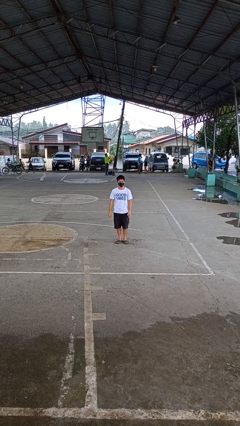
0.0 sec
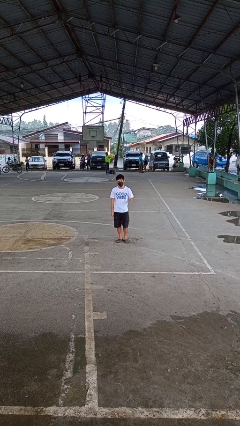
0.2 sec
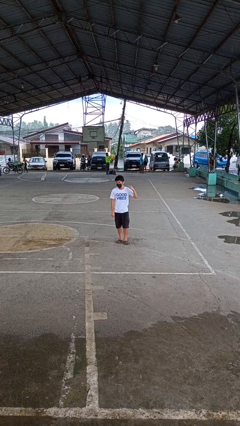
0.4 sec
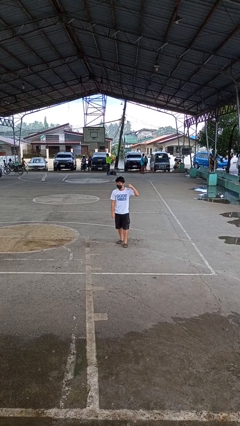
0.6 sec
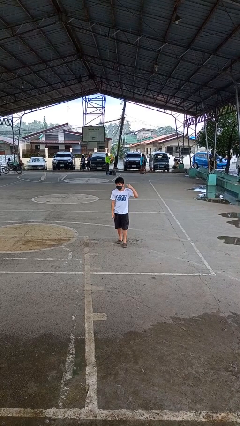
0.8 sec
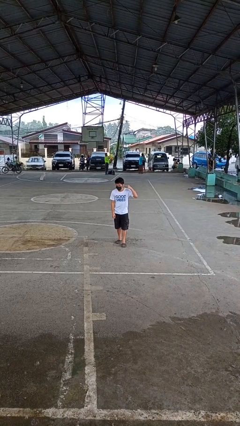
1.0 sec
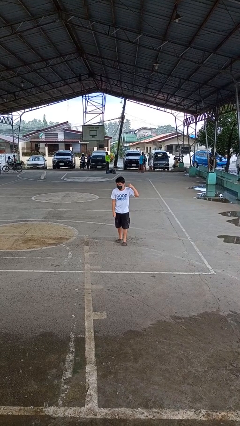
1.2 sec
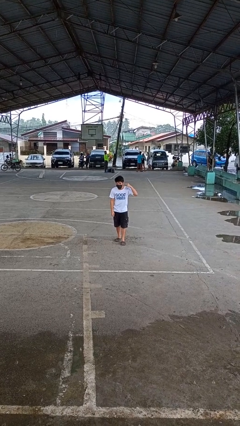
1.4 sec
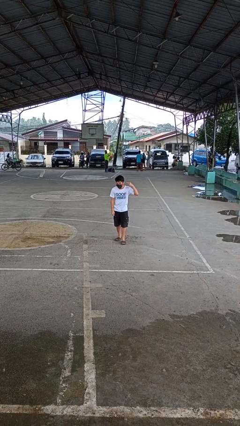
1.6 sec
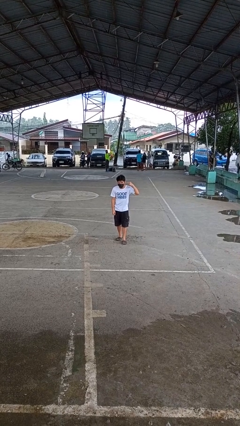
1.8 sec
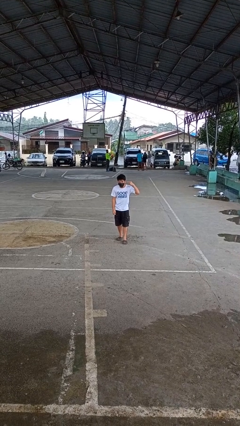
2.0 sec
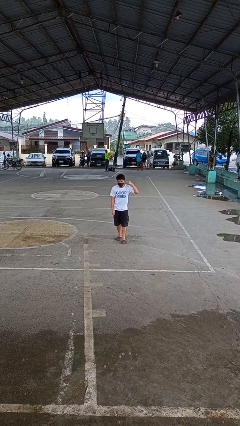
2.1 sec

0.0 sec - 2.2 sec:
person gestures listen closely

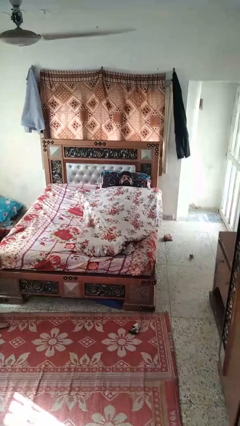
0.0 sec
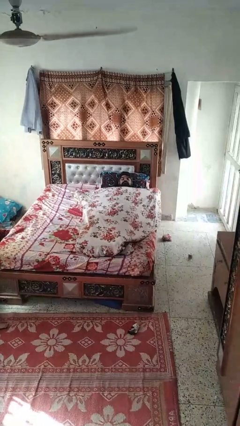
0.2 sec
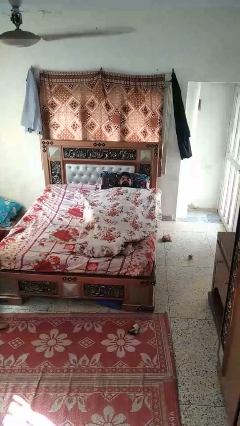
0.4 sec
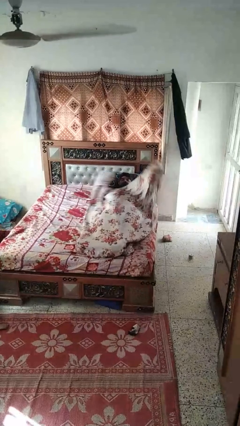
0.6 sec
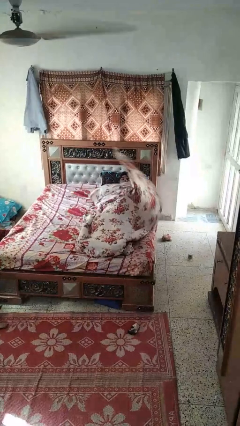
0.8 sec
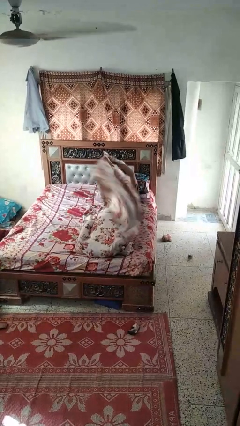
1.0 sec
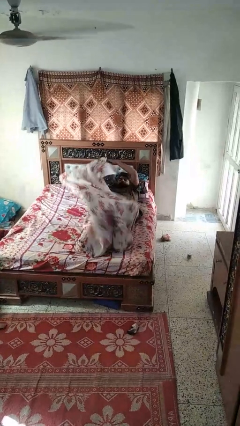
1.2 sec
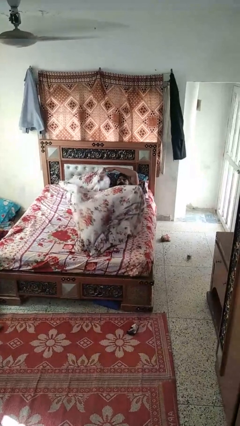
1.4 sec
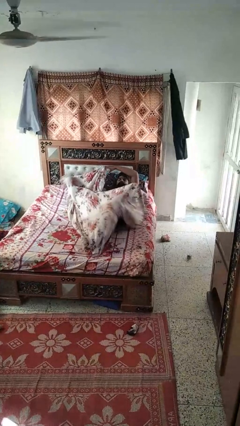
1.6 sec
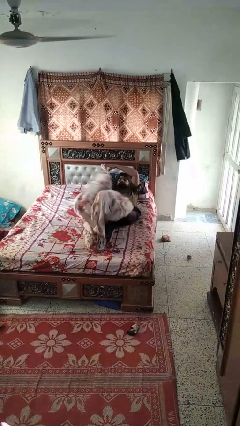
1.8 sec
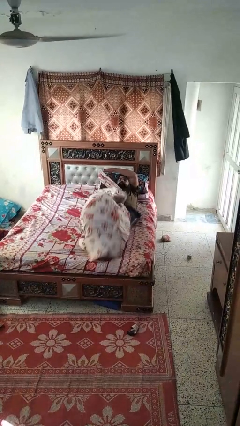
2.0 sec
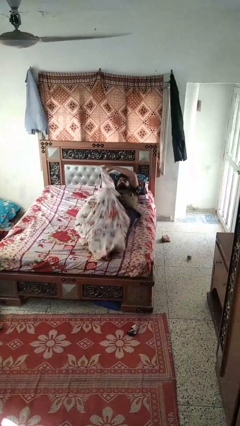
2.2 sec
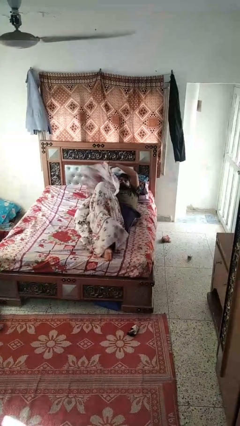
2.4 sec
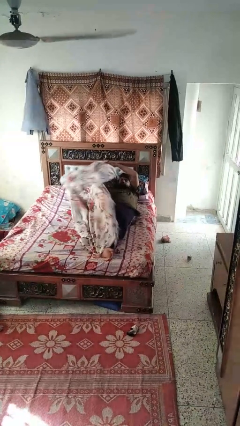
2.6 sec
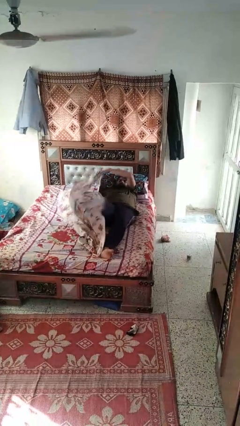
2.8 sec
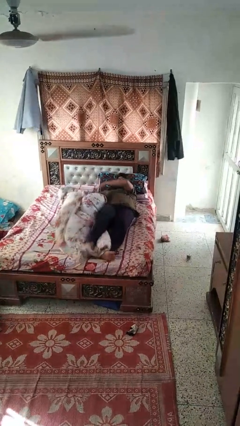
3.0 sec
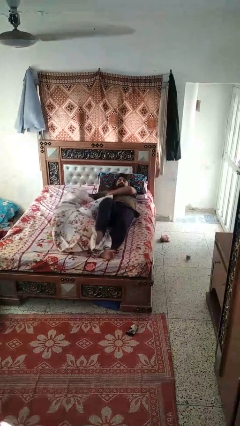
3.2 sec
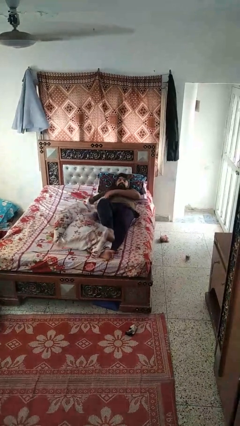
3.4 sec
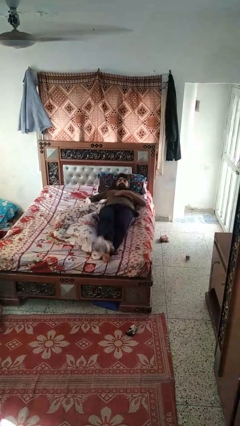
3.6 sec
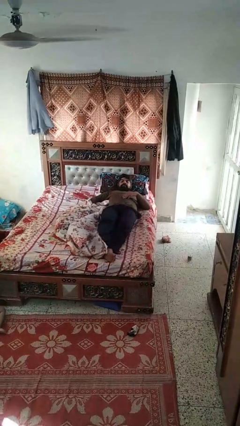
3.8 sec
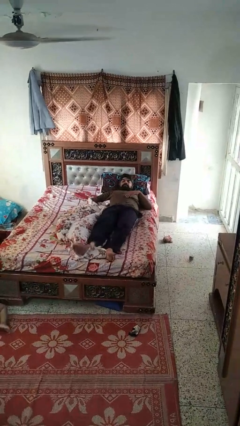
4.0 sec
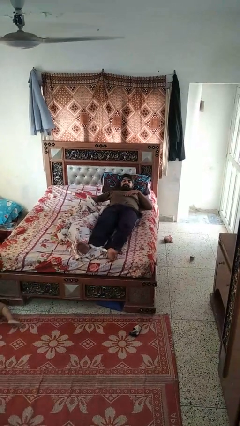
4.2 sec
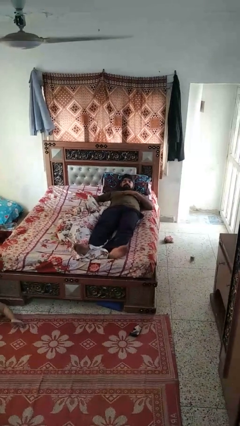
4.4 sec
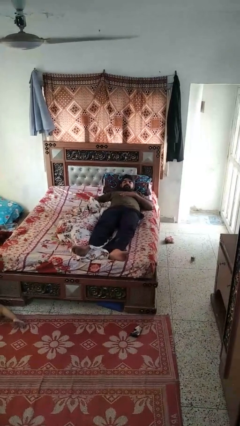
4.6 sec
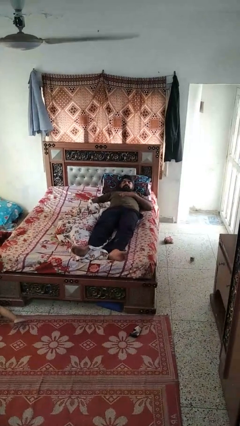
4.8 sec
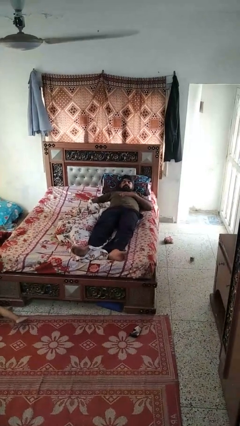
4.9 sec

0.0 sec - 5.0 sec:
person uncovers with bedsheets

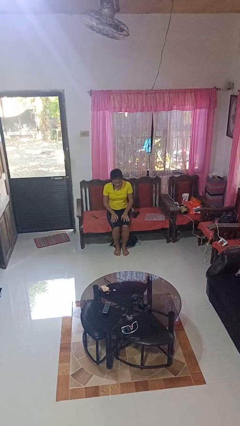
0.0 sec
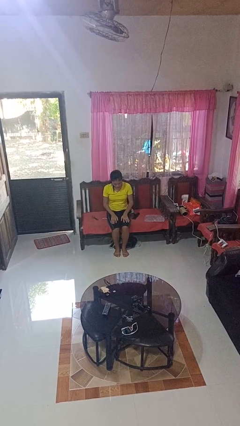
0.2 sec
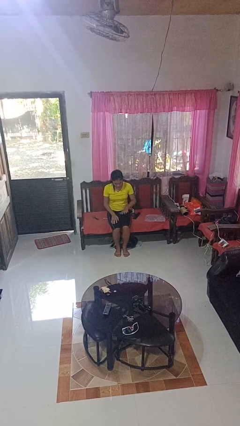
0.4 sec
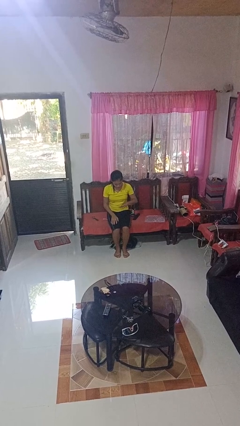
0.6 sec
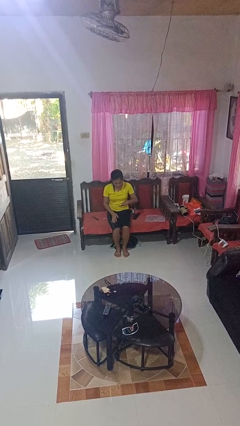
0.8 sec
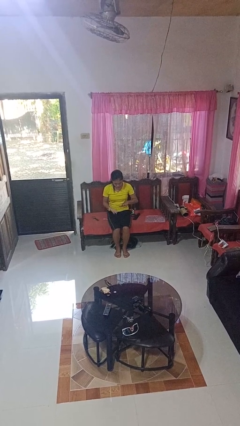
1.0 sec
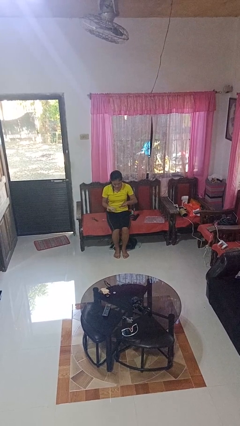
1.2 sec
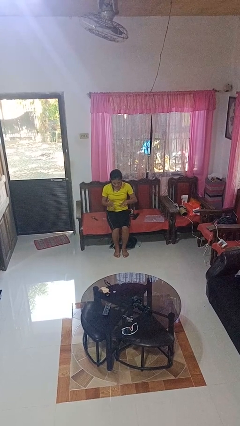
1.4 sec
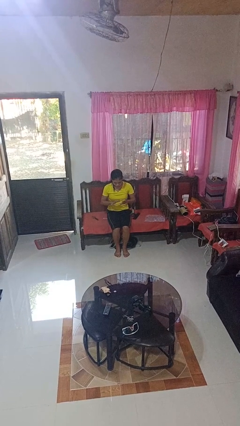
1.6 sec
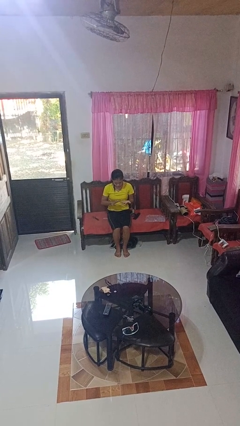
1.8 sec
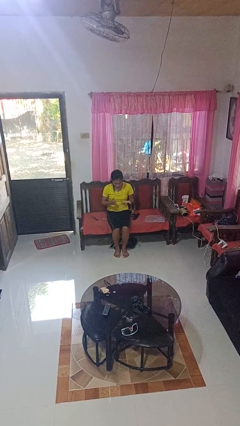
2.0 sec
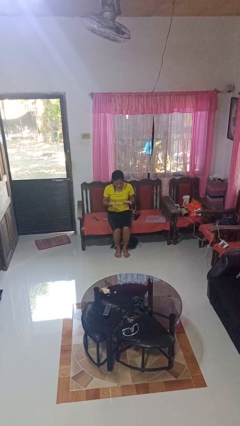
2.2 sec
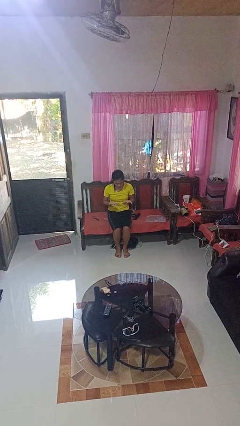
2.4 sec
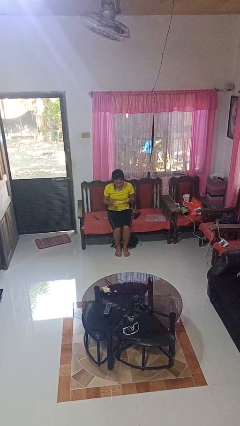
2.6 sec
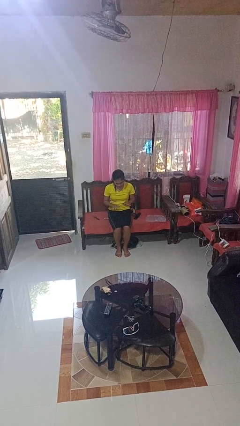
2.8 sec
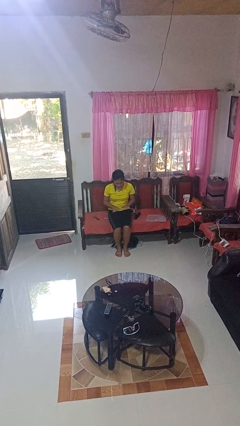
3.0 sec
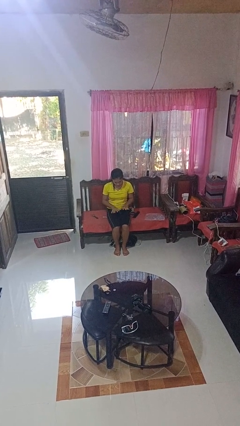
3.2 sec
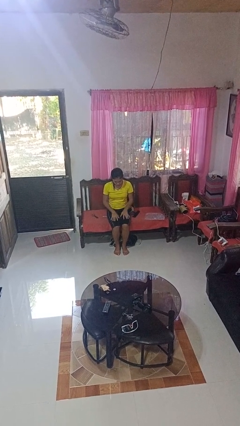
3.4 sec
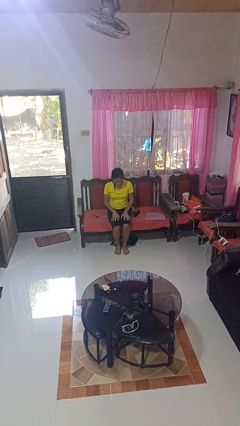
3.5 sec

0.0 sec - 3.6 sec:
person looks at hands in lap

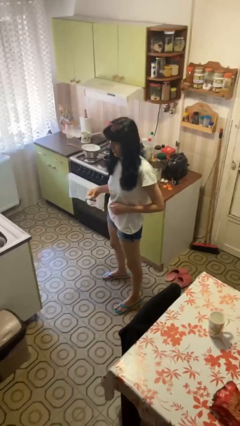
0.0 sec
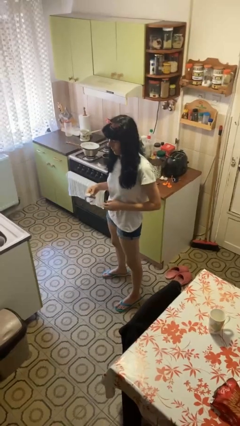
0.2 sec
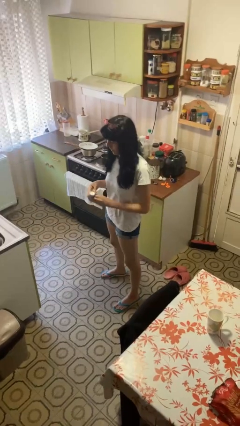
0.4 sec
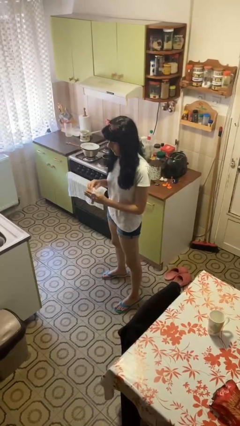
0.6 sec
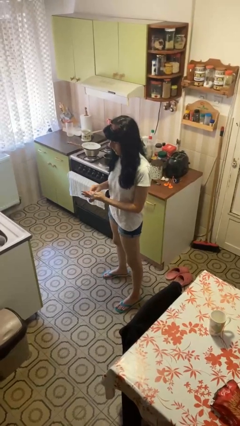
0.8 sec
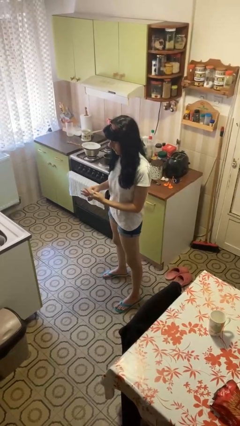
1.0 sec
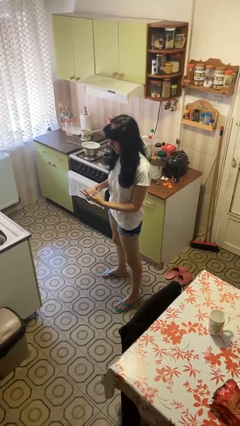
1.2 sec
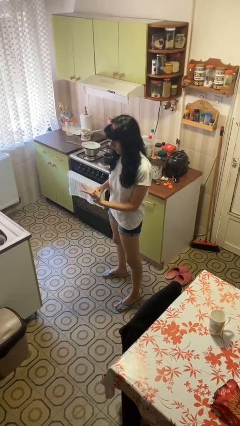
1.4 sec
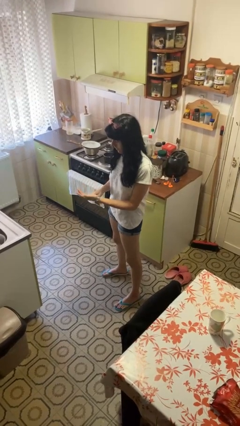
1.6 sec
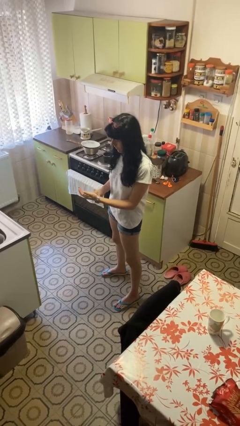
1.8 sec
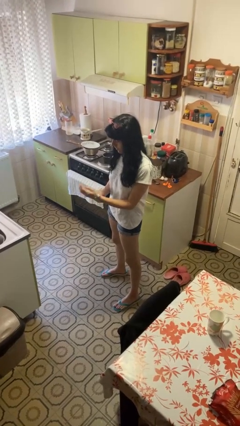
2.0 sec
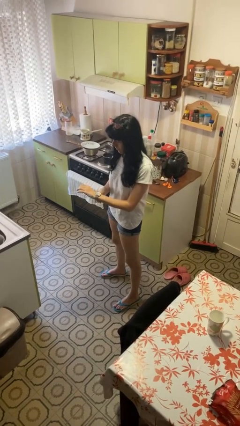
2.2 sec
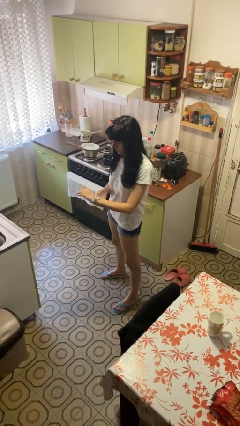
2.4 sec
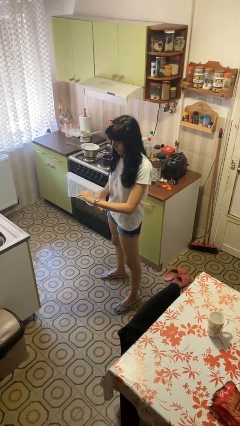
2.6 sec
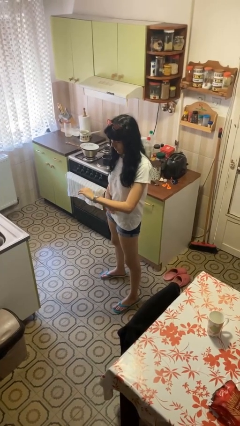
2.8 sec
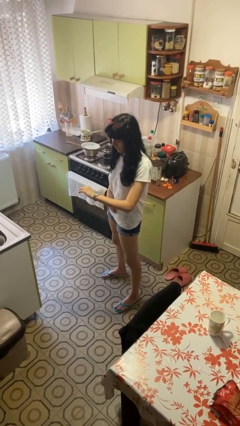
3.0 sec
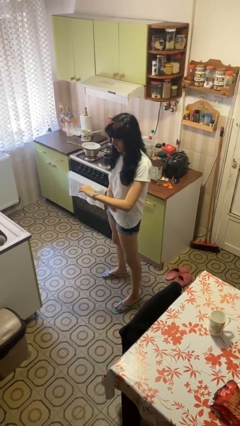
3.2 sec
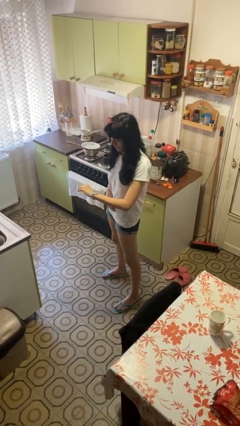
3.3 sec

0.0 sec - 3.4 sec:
person puts on wristwatch

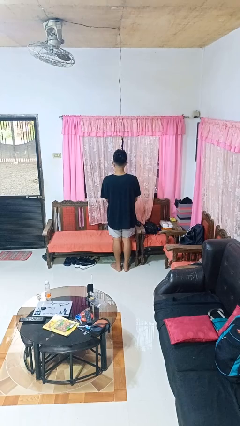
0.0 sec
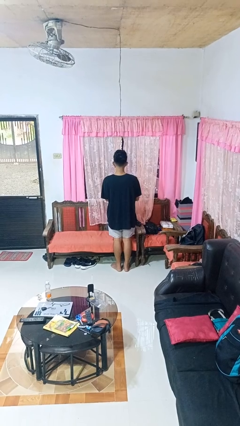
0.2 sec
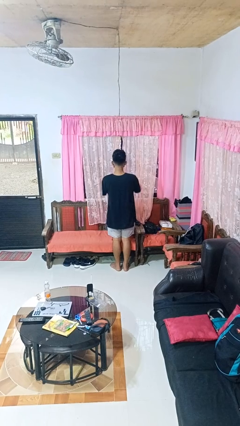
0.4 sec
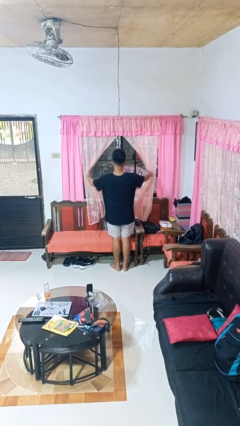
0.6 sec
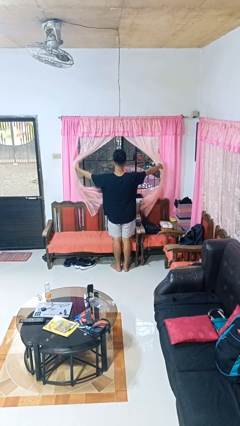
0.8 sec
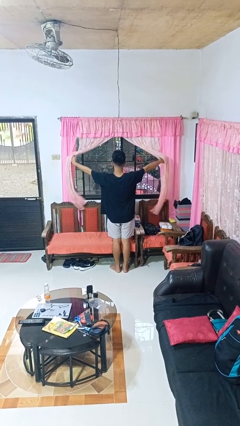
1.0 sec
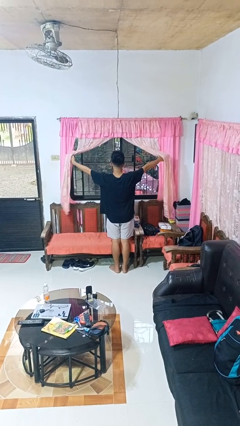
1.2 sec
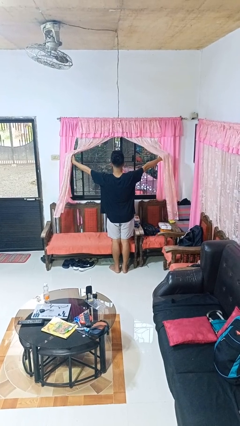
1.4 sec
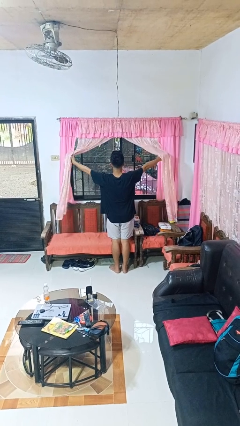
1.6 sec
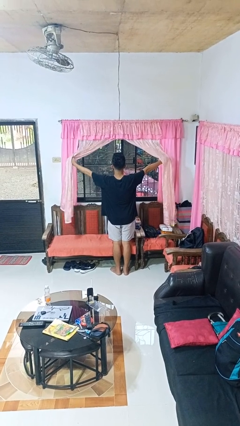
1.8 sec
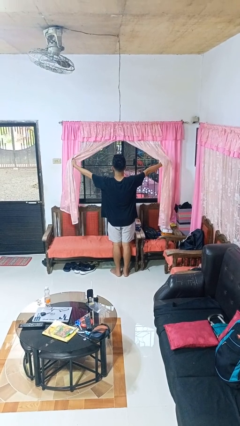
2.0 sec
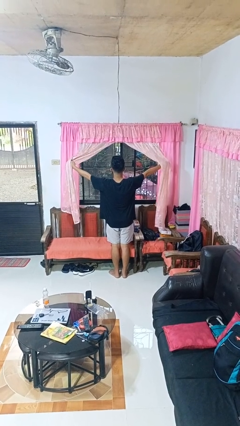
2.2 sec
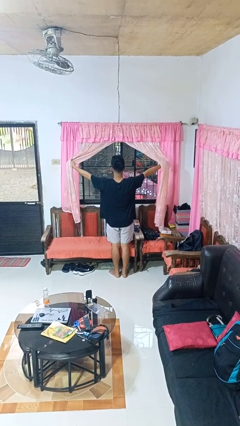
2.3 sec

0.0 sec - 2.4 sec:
person opens curtains

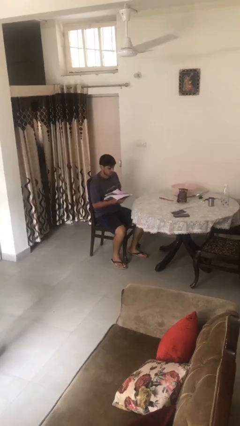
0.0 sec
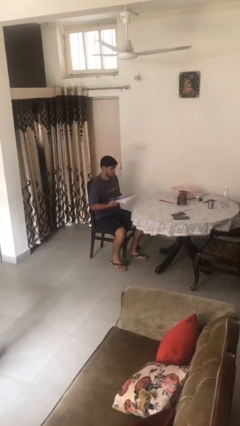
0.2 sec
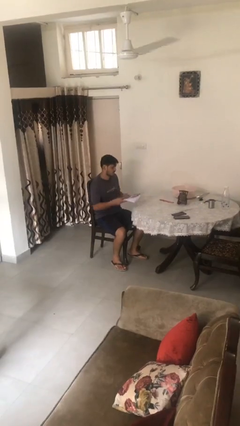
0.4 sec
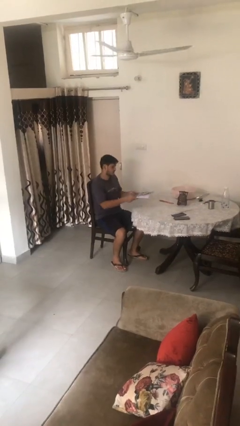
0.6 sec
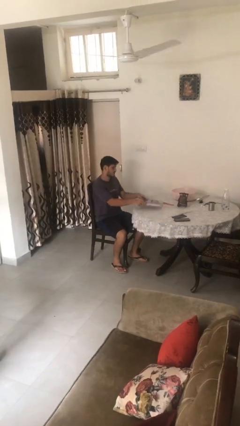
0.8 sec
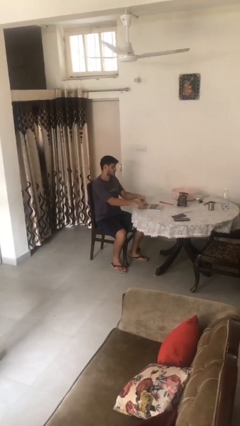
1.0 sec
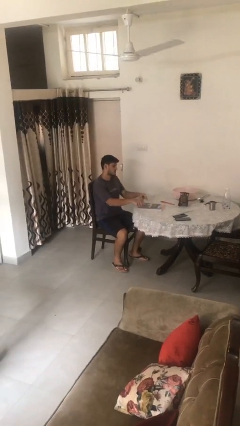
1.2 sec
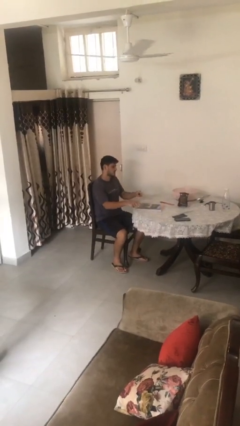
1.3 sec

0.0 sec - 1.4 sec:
person puts down object on table
